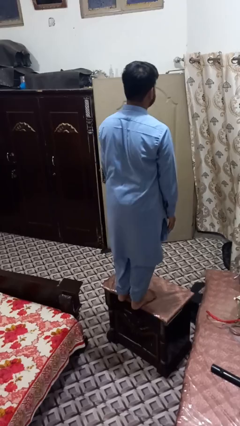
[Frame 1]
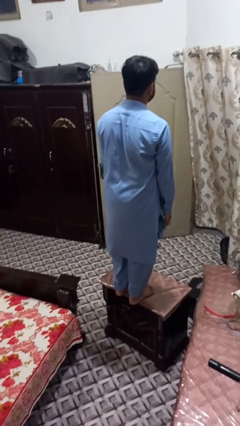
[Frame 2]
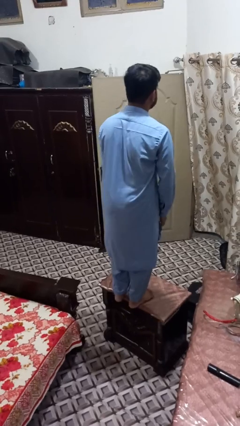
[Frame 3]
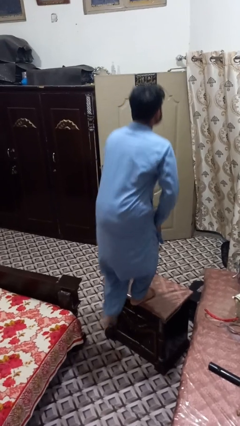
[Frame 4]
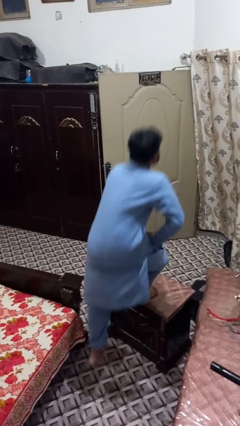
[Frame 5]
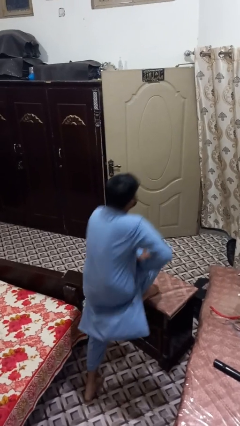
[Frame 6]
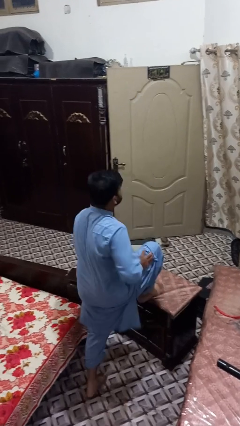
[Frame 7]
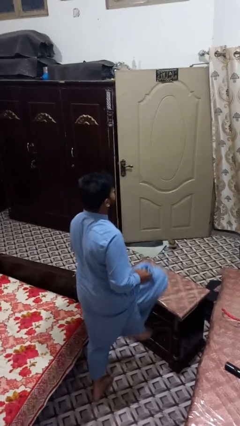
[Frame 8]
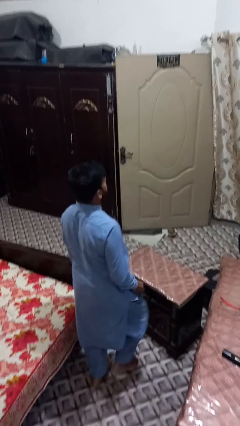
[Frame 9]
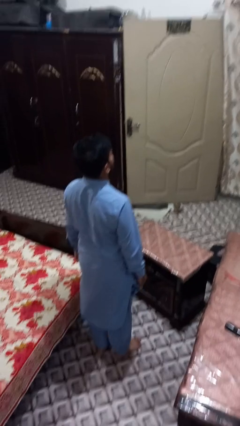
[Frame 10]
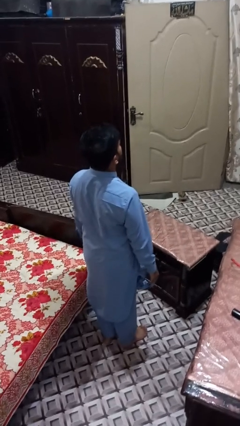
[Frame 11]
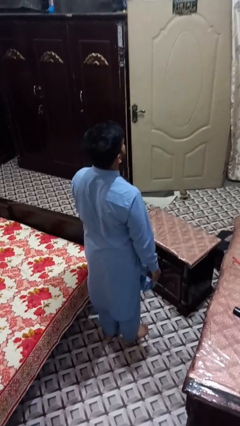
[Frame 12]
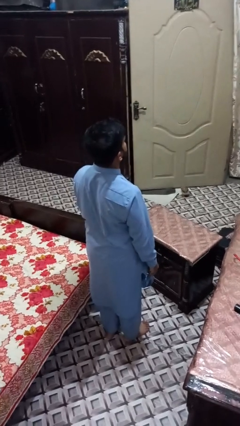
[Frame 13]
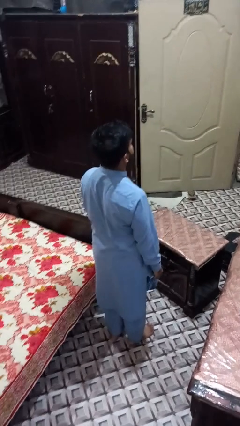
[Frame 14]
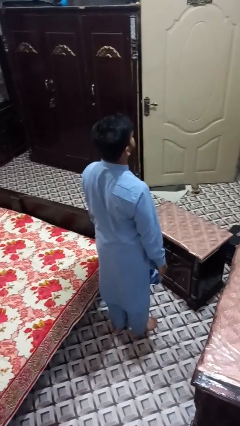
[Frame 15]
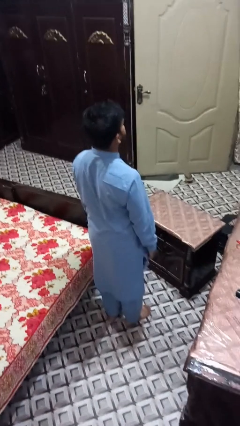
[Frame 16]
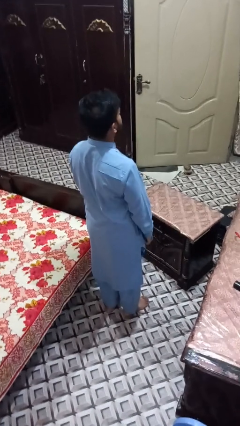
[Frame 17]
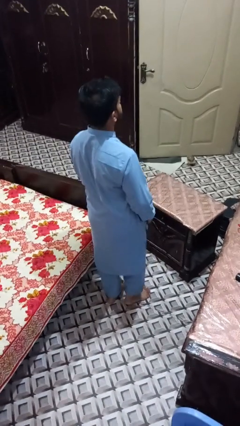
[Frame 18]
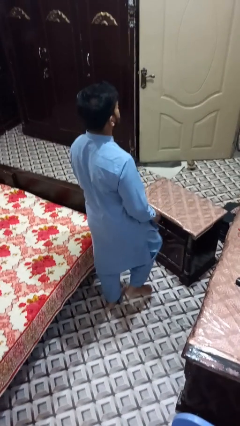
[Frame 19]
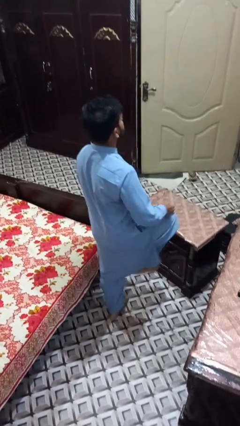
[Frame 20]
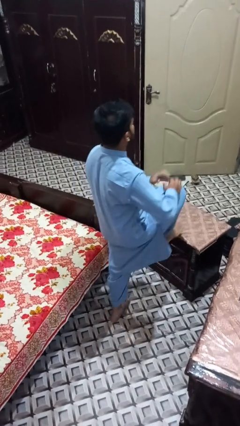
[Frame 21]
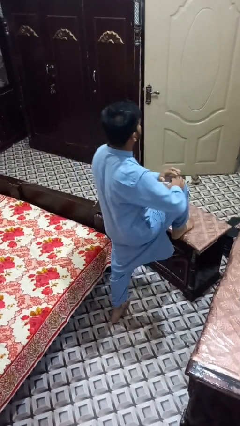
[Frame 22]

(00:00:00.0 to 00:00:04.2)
person climbs off table

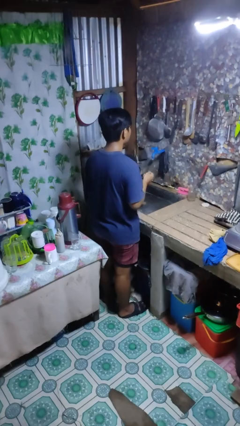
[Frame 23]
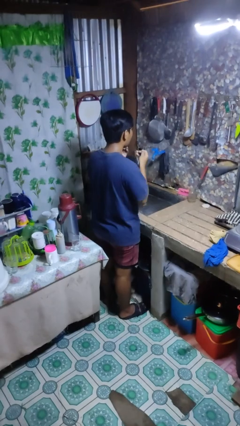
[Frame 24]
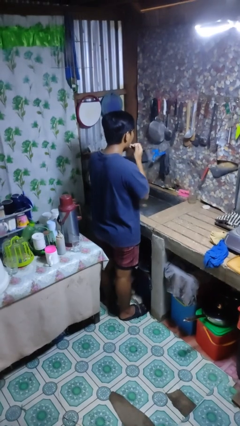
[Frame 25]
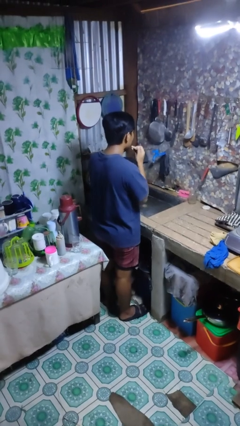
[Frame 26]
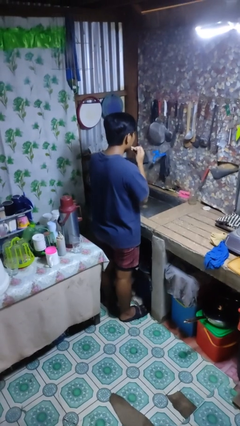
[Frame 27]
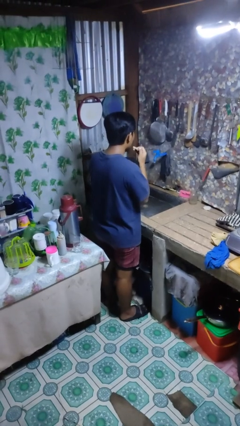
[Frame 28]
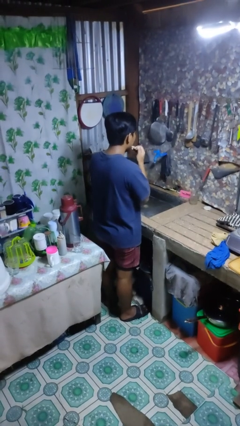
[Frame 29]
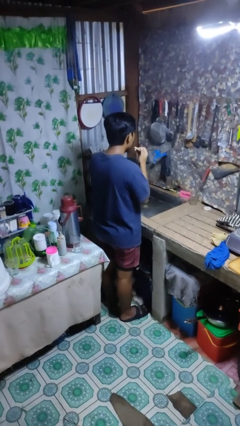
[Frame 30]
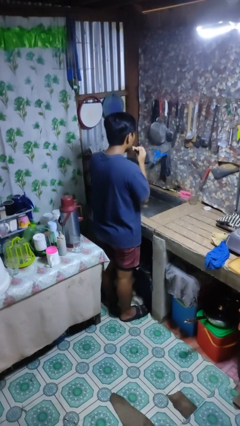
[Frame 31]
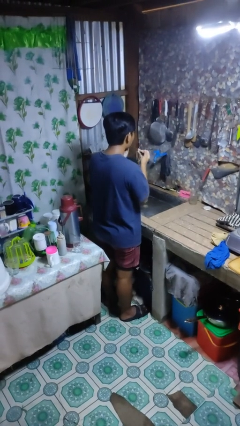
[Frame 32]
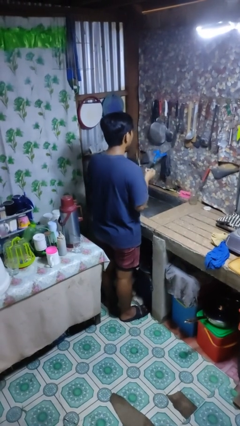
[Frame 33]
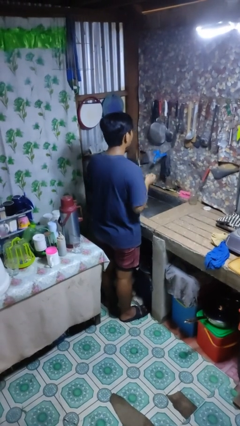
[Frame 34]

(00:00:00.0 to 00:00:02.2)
person flosses

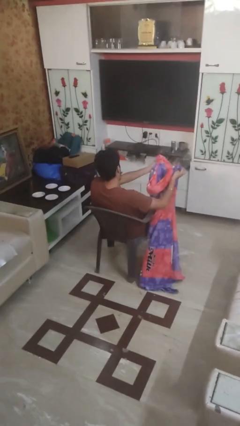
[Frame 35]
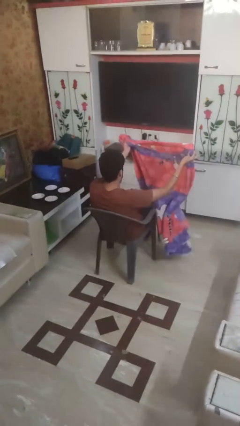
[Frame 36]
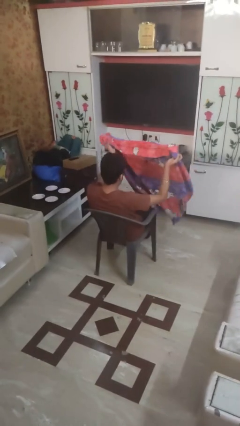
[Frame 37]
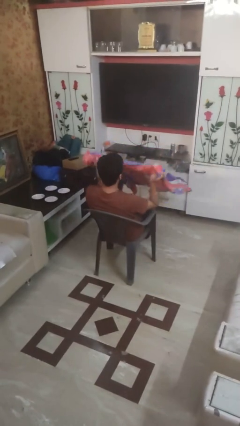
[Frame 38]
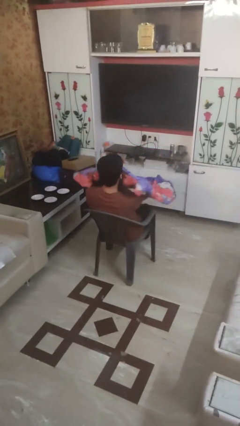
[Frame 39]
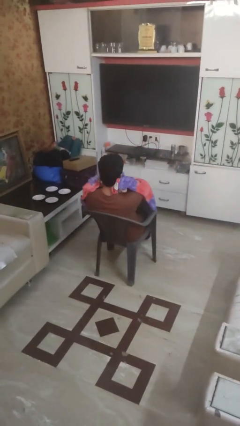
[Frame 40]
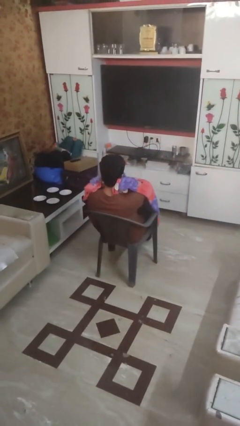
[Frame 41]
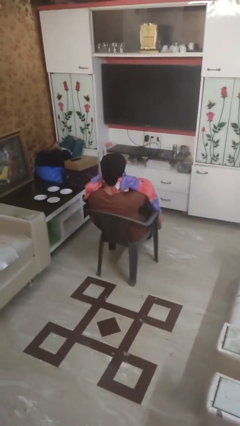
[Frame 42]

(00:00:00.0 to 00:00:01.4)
person covers with blanket

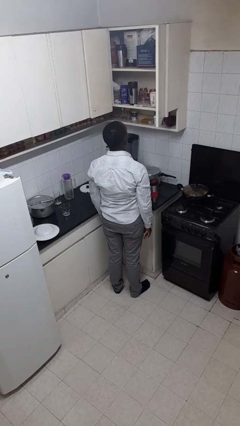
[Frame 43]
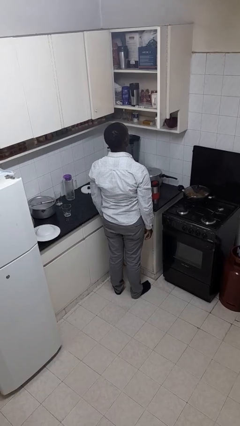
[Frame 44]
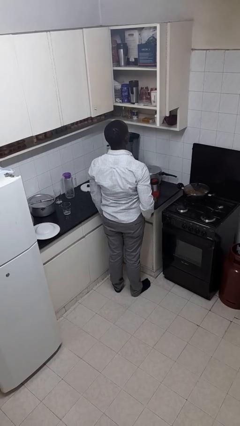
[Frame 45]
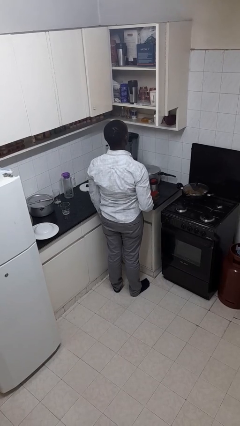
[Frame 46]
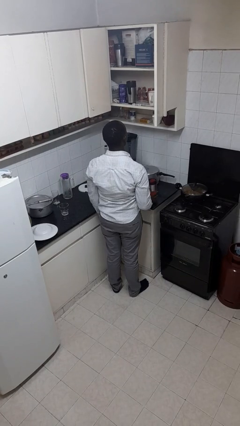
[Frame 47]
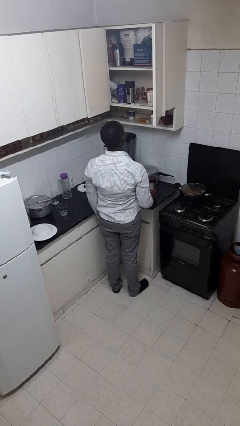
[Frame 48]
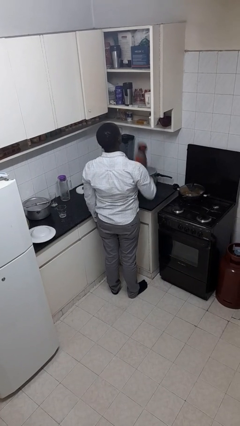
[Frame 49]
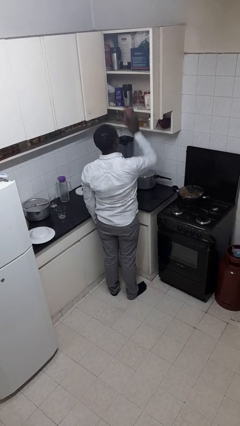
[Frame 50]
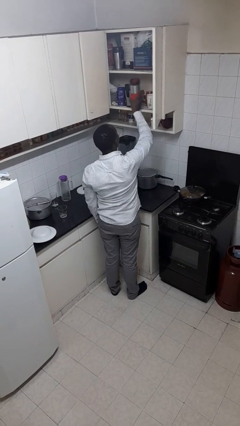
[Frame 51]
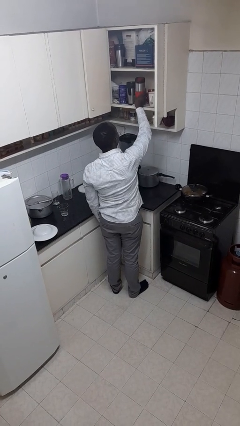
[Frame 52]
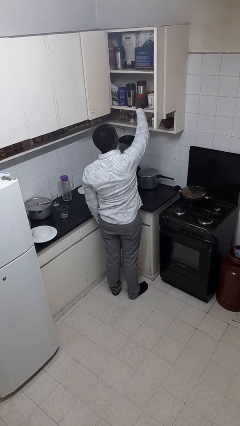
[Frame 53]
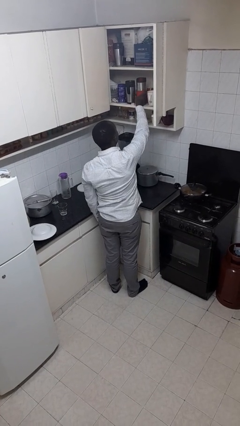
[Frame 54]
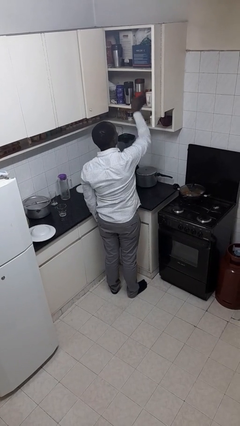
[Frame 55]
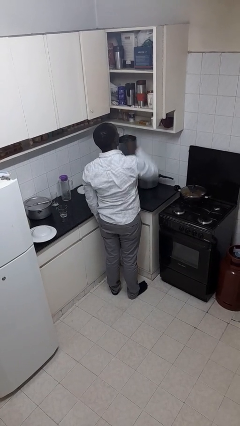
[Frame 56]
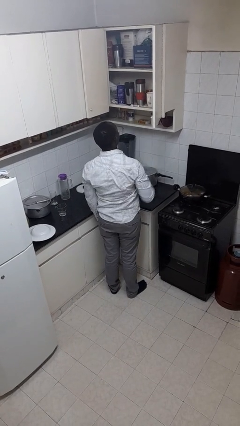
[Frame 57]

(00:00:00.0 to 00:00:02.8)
person puts object in cabinet

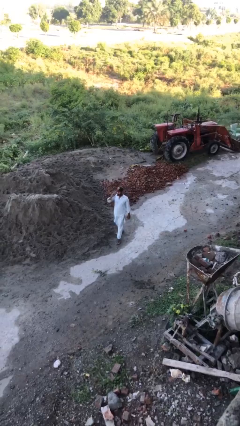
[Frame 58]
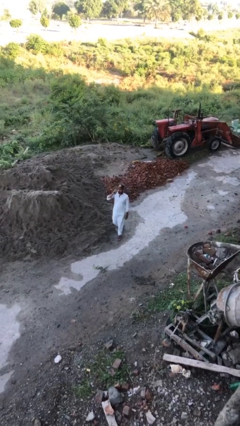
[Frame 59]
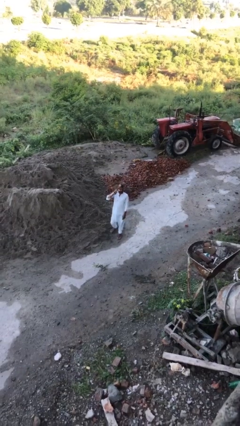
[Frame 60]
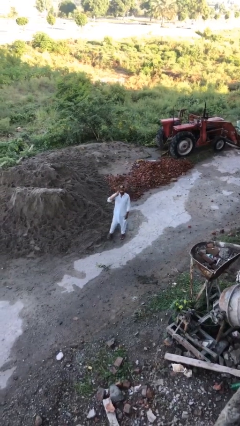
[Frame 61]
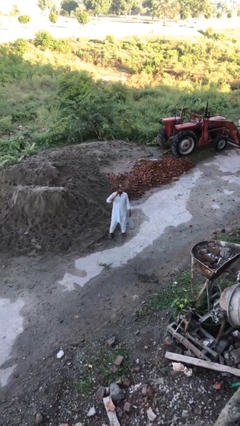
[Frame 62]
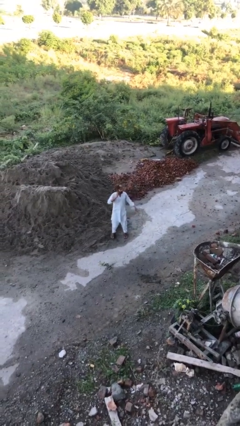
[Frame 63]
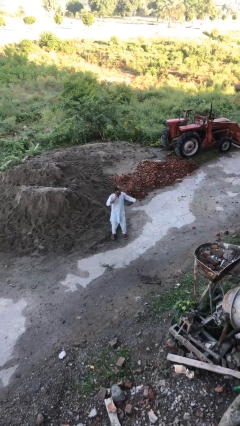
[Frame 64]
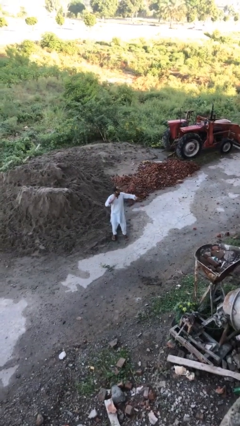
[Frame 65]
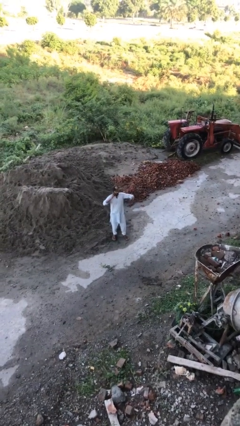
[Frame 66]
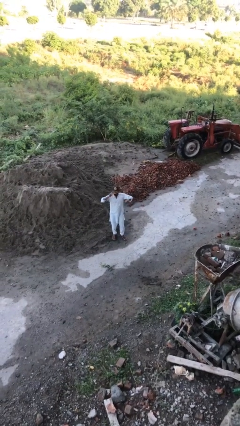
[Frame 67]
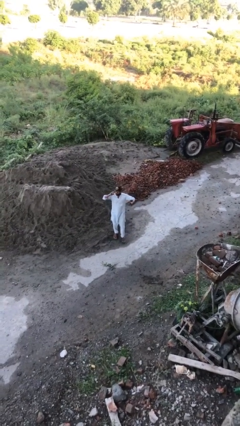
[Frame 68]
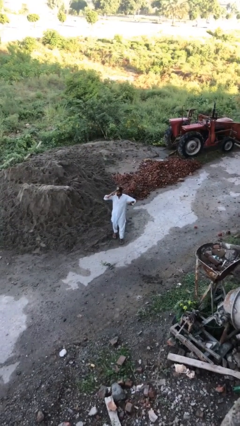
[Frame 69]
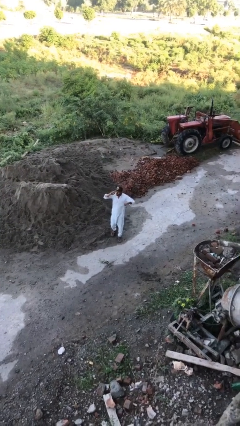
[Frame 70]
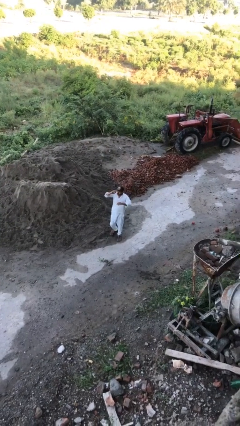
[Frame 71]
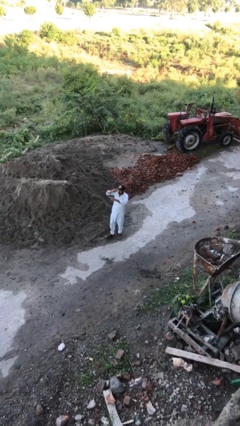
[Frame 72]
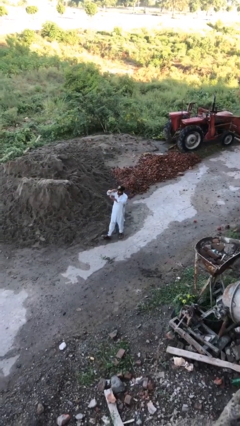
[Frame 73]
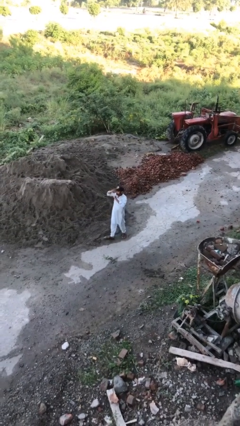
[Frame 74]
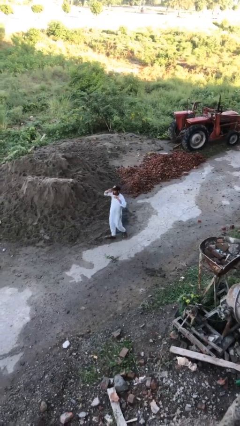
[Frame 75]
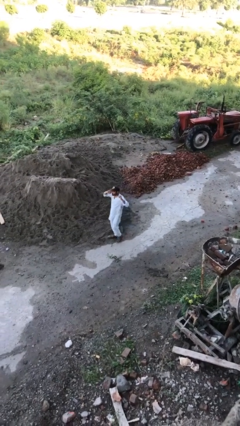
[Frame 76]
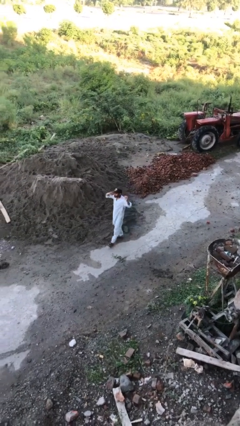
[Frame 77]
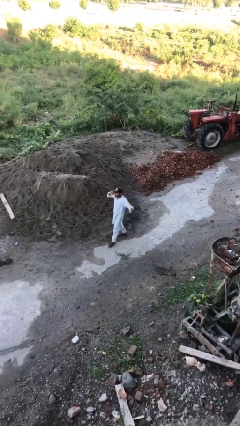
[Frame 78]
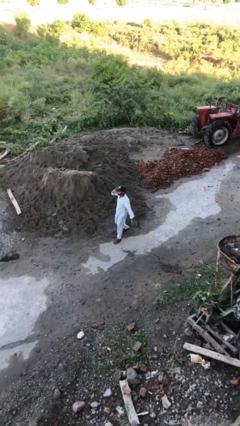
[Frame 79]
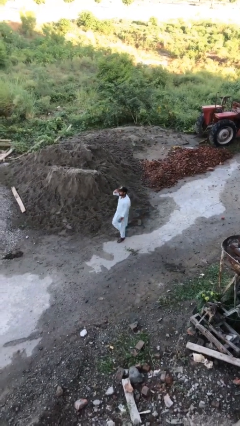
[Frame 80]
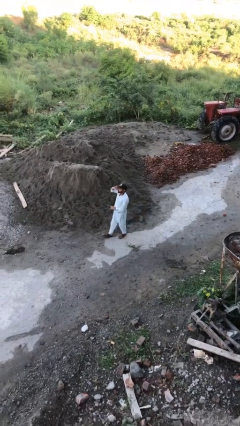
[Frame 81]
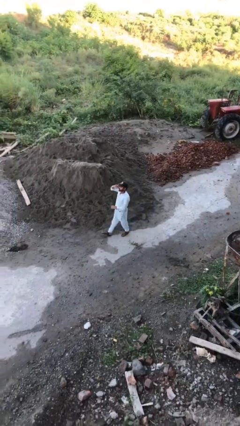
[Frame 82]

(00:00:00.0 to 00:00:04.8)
person talks on phone

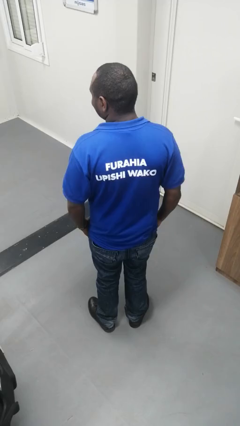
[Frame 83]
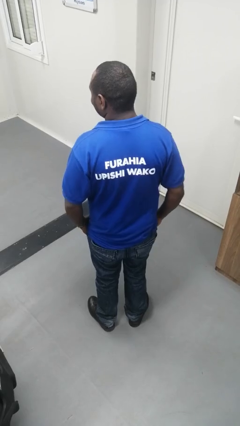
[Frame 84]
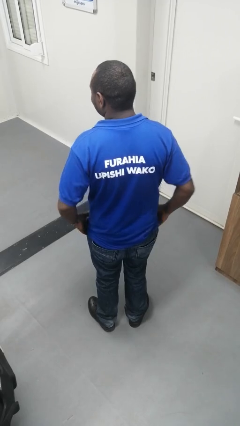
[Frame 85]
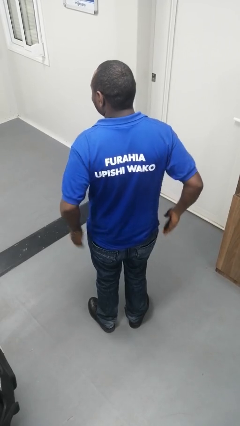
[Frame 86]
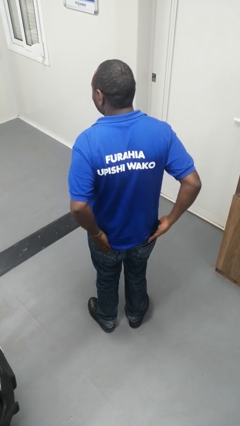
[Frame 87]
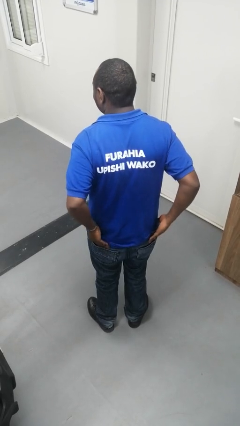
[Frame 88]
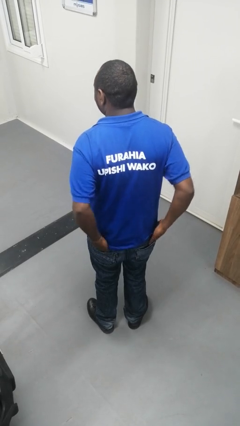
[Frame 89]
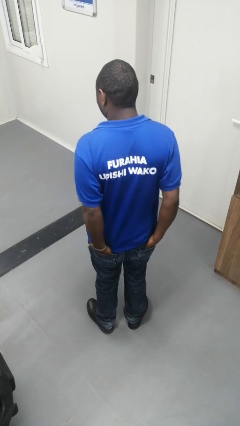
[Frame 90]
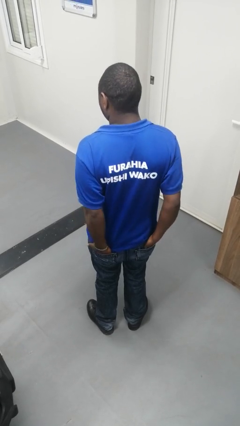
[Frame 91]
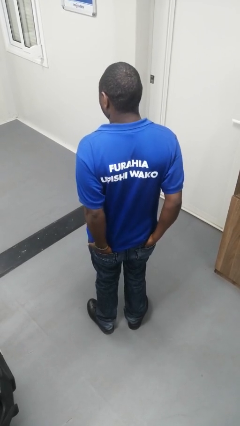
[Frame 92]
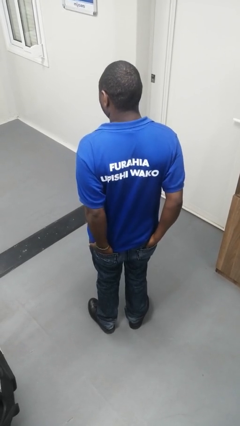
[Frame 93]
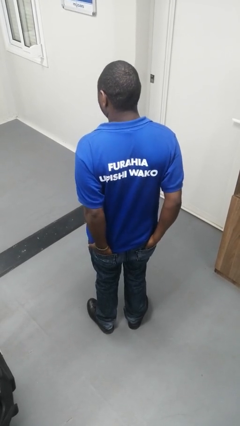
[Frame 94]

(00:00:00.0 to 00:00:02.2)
person puts hands in back pockets
